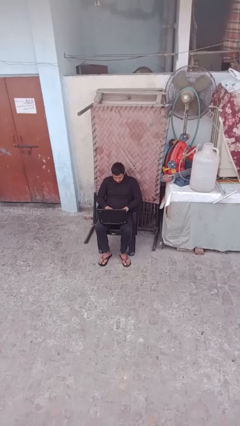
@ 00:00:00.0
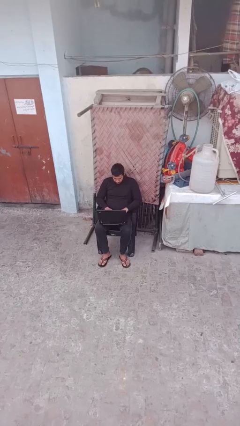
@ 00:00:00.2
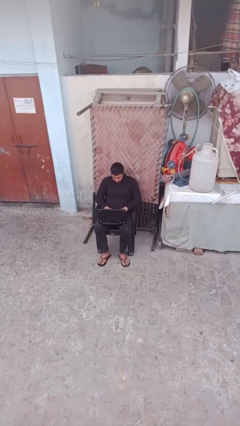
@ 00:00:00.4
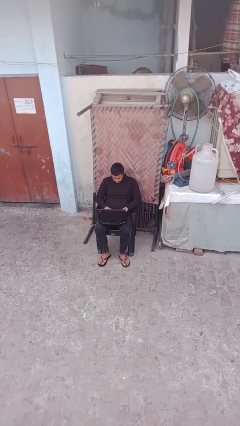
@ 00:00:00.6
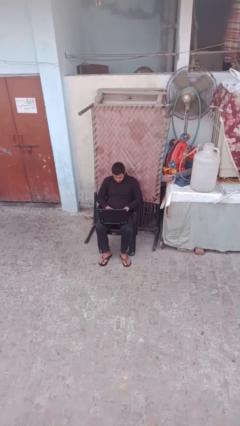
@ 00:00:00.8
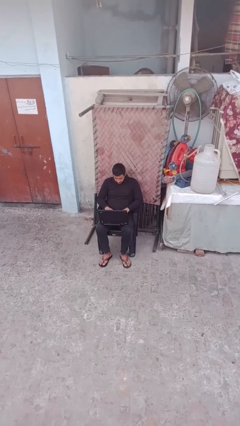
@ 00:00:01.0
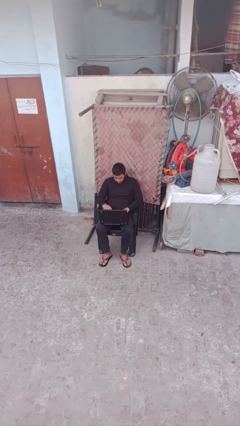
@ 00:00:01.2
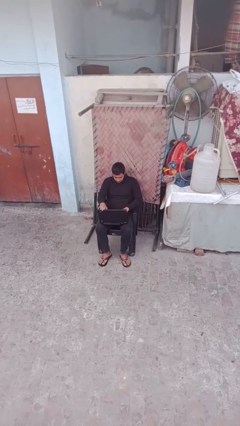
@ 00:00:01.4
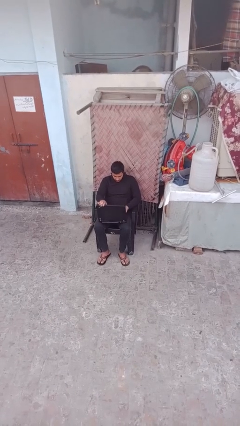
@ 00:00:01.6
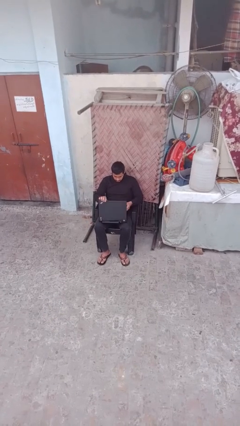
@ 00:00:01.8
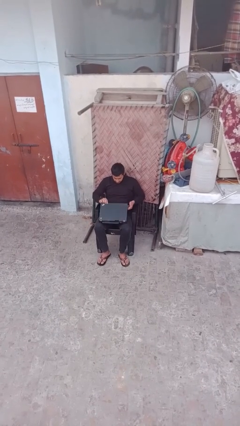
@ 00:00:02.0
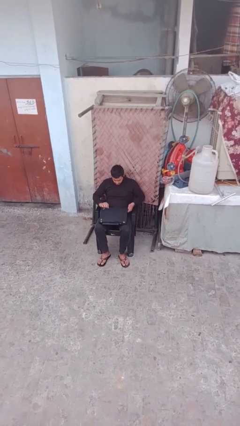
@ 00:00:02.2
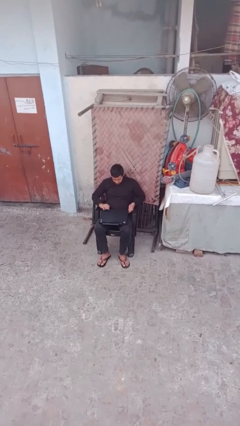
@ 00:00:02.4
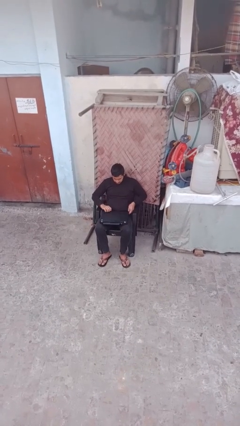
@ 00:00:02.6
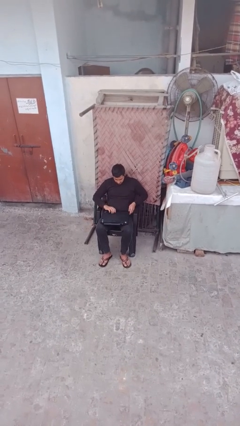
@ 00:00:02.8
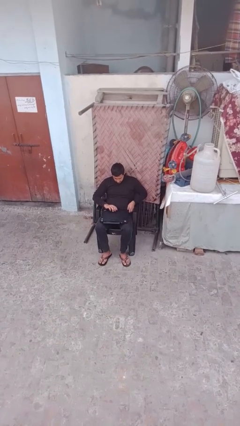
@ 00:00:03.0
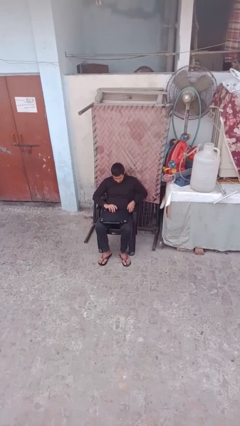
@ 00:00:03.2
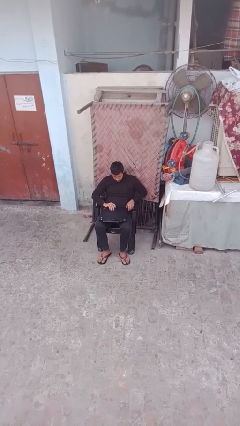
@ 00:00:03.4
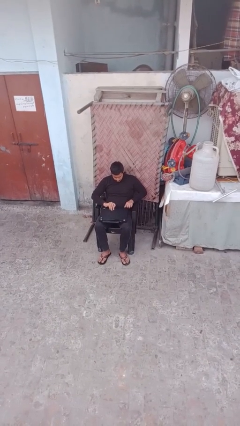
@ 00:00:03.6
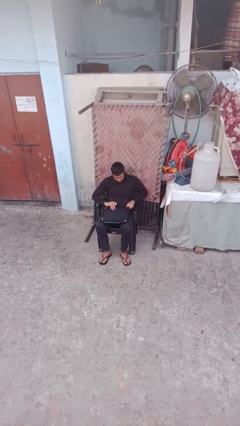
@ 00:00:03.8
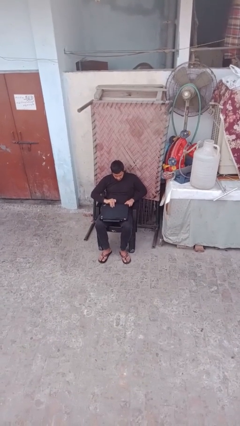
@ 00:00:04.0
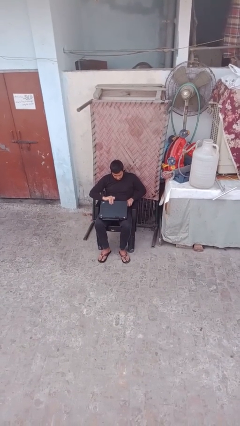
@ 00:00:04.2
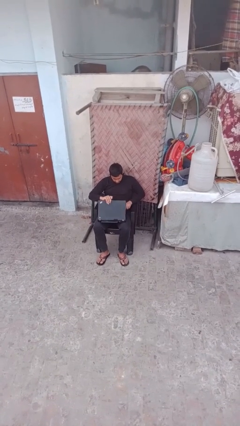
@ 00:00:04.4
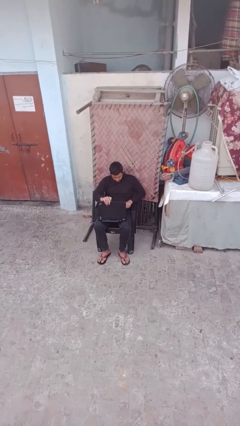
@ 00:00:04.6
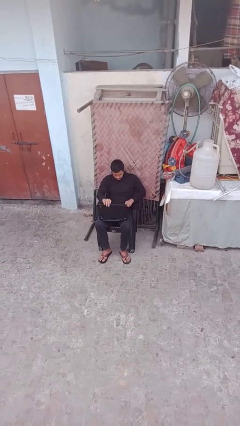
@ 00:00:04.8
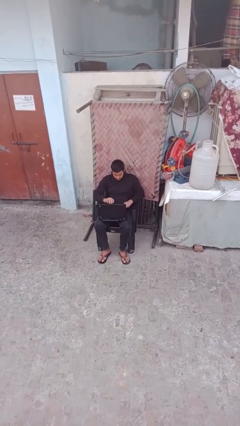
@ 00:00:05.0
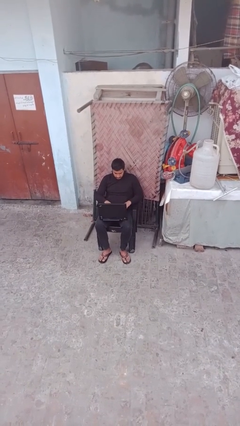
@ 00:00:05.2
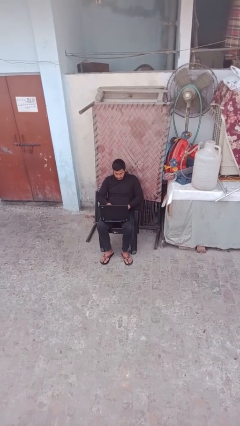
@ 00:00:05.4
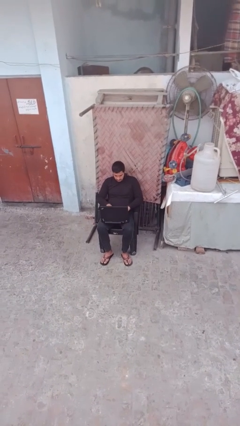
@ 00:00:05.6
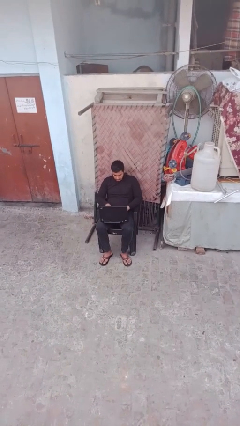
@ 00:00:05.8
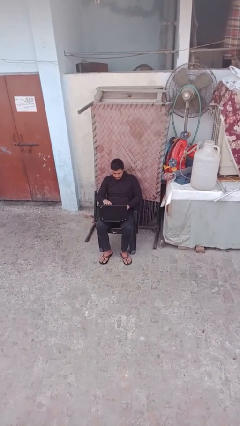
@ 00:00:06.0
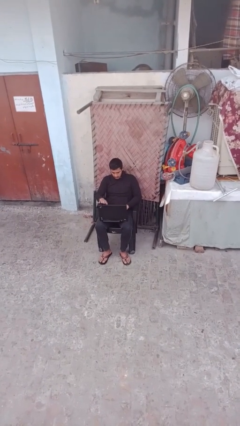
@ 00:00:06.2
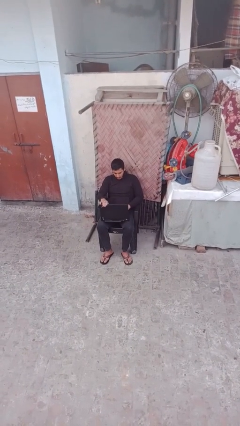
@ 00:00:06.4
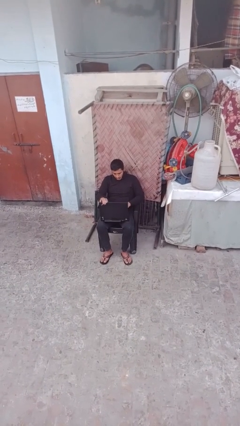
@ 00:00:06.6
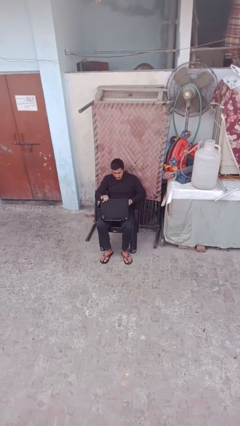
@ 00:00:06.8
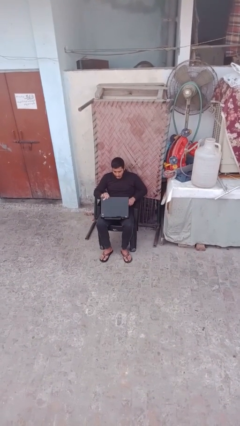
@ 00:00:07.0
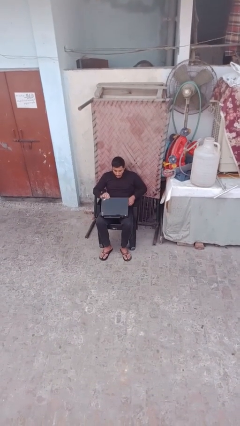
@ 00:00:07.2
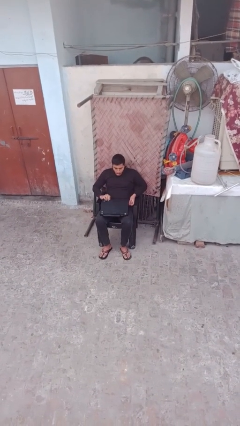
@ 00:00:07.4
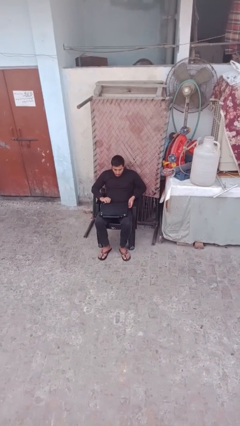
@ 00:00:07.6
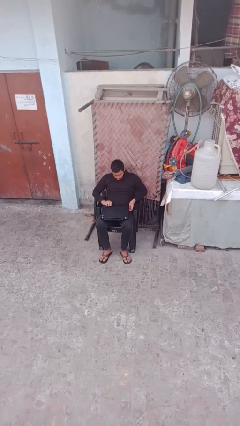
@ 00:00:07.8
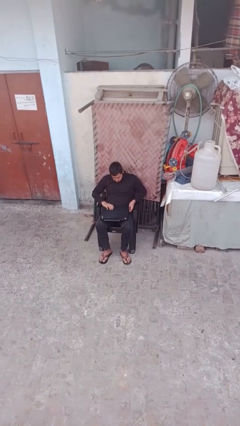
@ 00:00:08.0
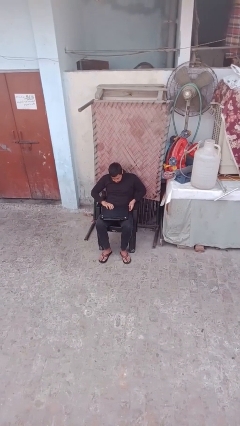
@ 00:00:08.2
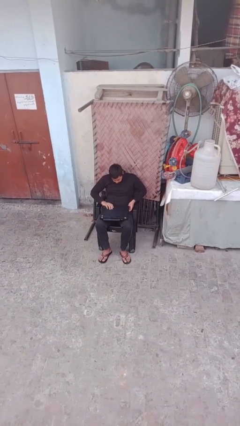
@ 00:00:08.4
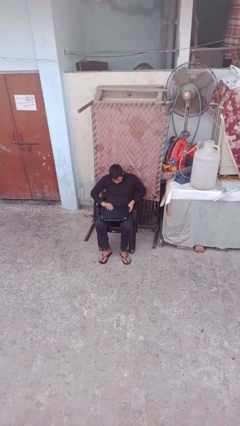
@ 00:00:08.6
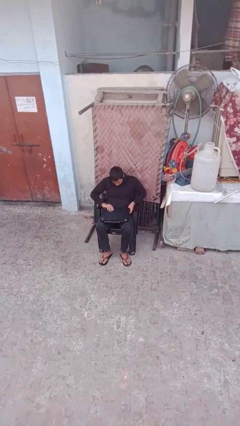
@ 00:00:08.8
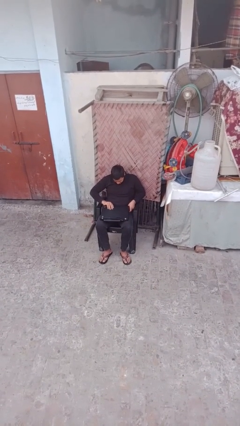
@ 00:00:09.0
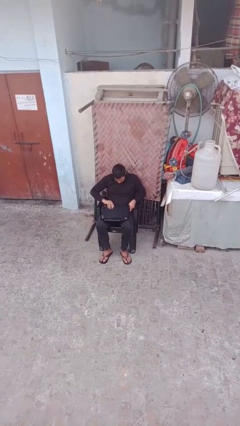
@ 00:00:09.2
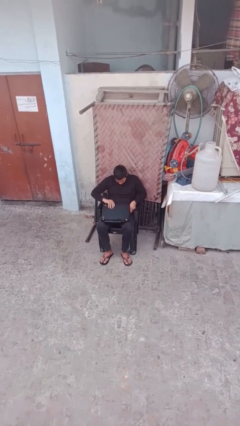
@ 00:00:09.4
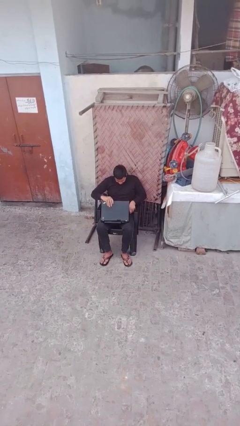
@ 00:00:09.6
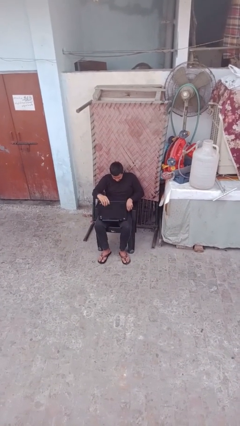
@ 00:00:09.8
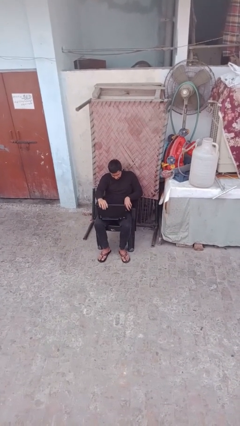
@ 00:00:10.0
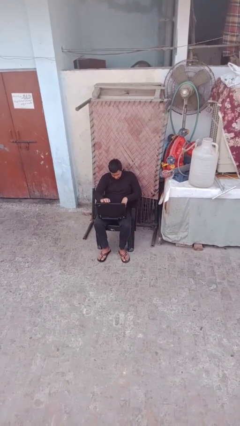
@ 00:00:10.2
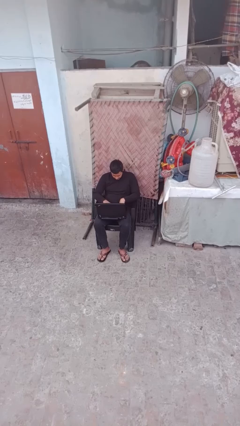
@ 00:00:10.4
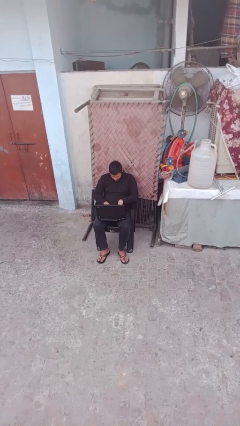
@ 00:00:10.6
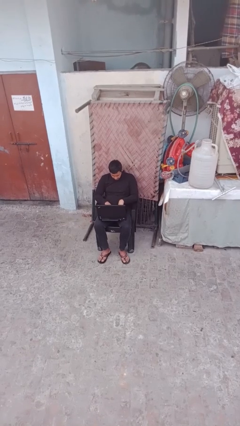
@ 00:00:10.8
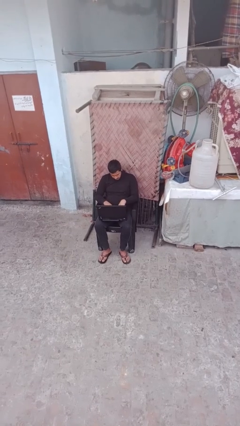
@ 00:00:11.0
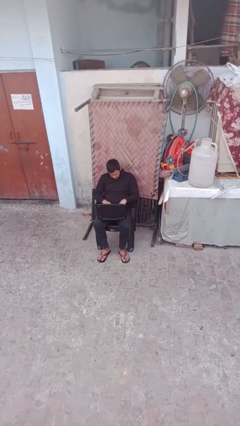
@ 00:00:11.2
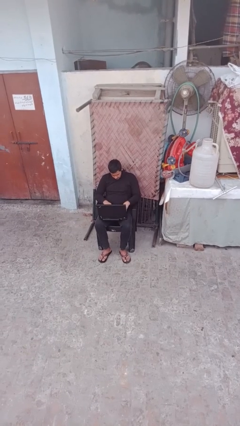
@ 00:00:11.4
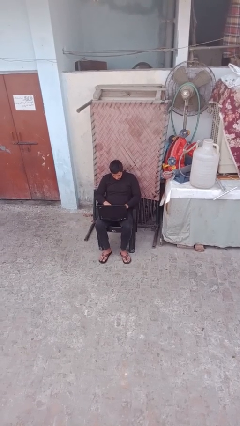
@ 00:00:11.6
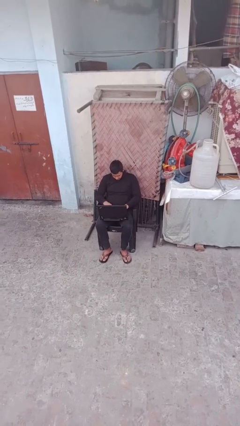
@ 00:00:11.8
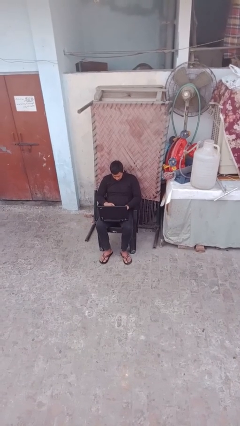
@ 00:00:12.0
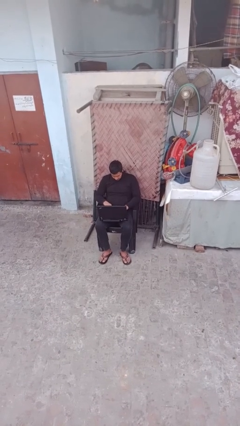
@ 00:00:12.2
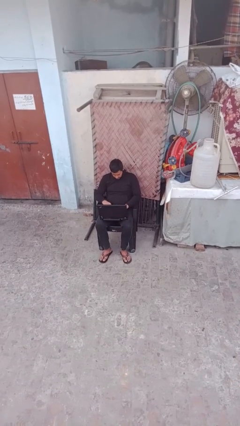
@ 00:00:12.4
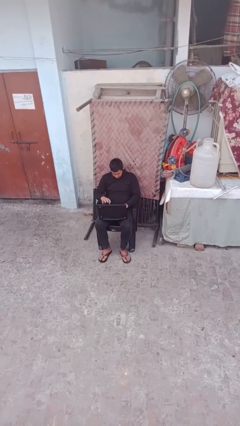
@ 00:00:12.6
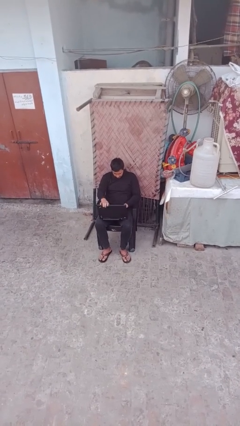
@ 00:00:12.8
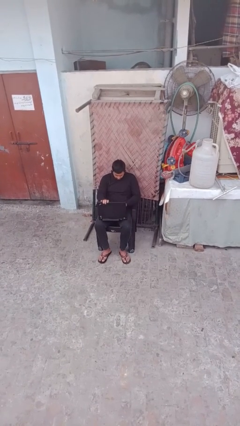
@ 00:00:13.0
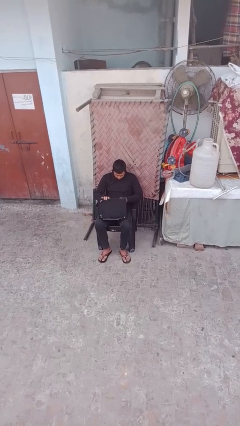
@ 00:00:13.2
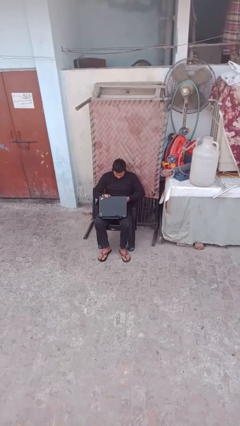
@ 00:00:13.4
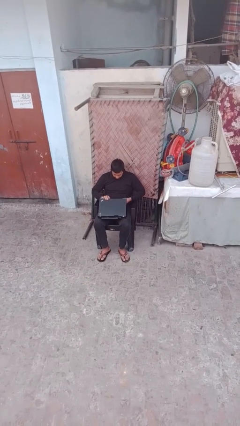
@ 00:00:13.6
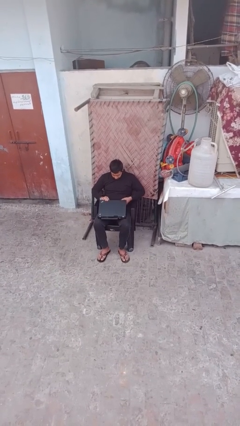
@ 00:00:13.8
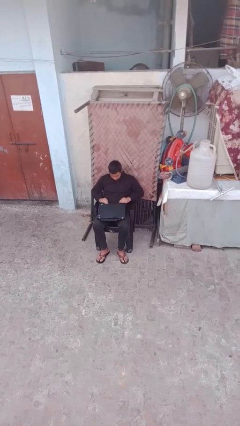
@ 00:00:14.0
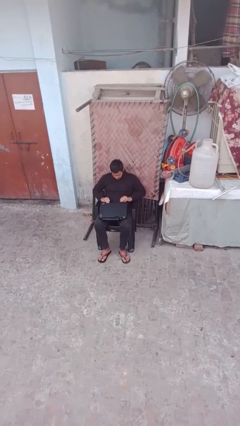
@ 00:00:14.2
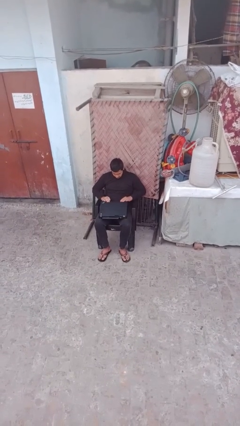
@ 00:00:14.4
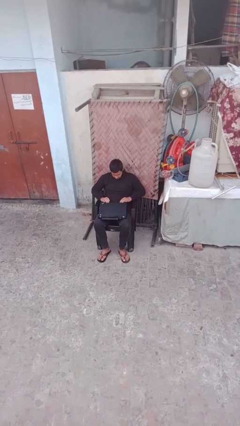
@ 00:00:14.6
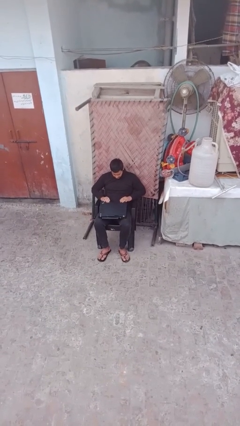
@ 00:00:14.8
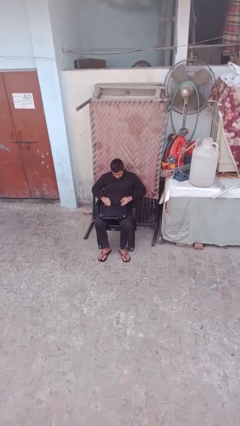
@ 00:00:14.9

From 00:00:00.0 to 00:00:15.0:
person interacts with laptop

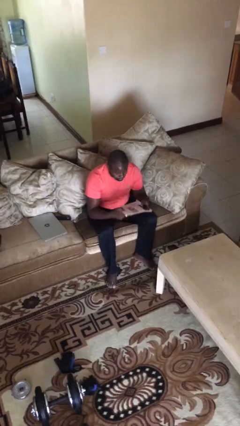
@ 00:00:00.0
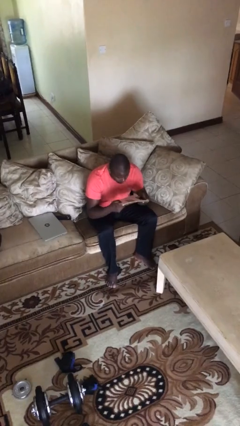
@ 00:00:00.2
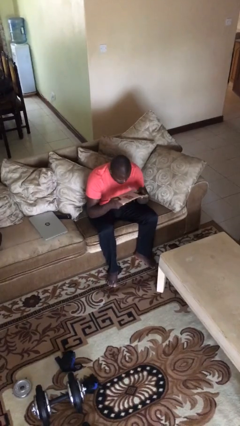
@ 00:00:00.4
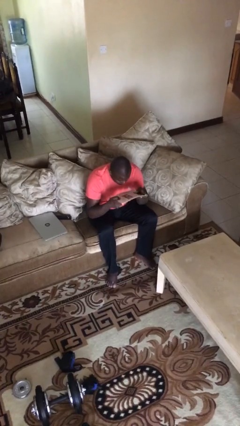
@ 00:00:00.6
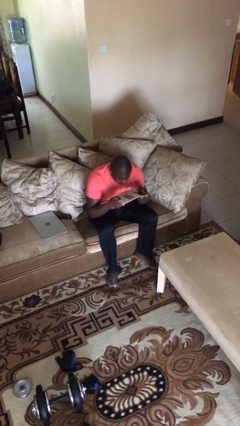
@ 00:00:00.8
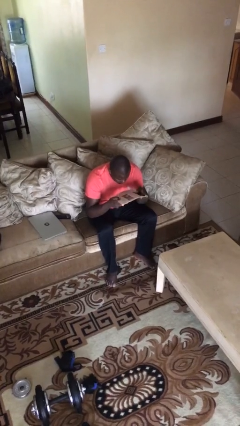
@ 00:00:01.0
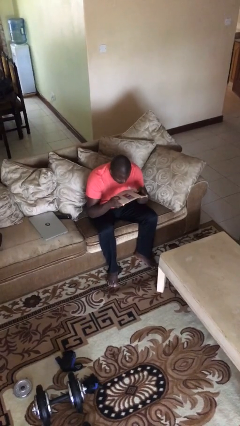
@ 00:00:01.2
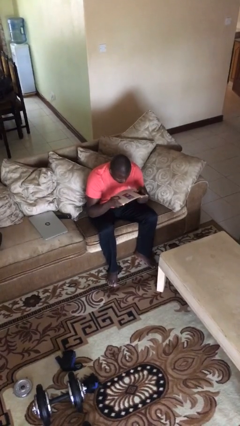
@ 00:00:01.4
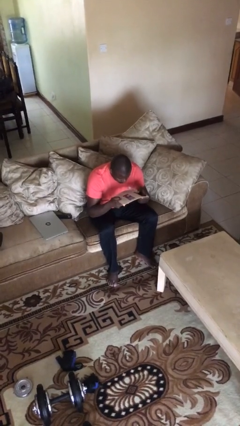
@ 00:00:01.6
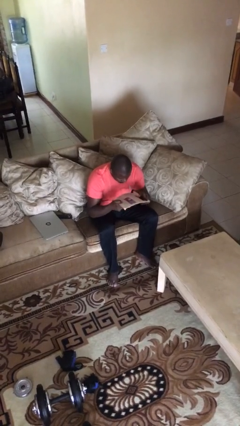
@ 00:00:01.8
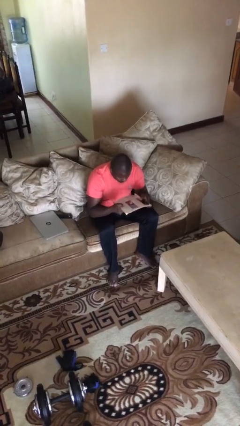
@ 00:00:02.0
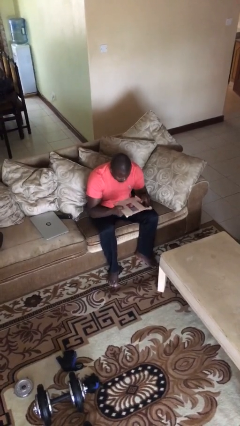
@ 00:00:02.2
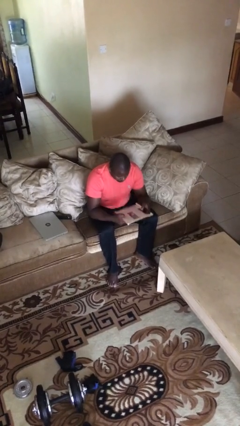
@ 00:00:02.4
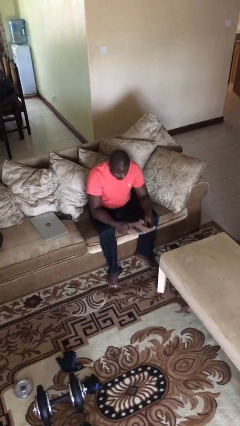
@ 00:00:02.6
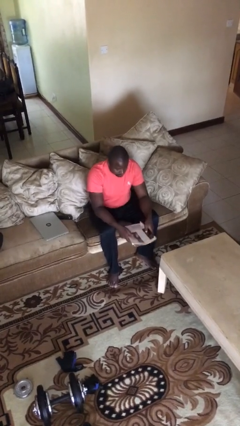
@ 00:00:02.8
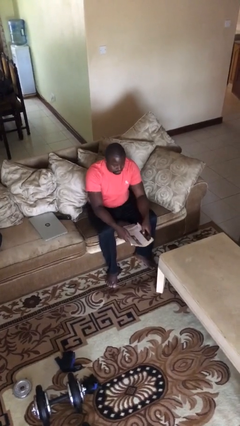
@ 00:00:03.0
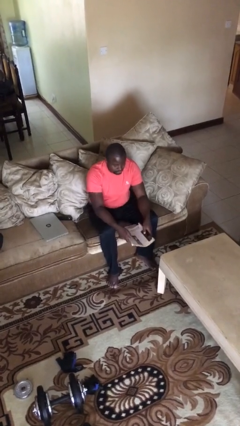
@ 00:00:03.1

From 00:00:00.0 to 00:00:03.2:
person reads document
